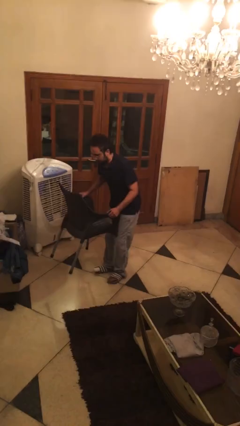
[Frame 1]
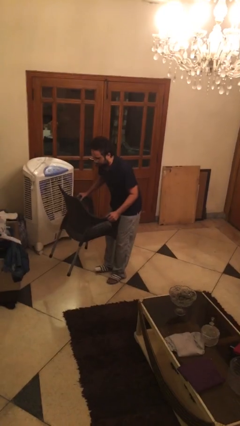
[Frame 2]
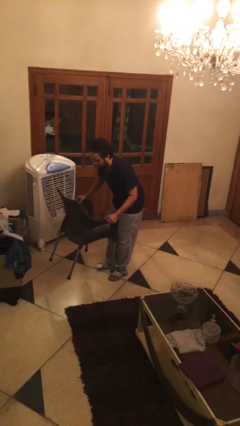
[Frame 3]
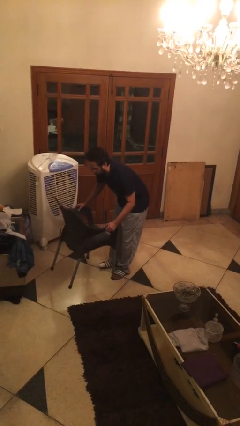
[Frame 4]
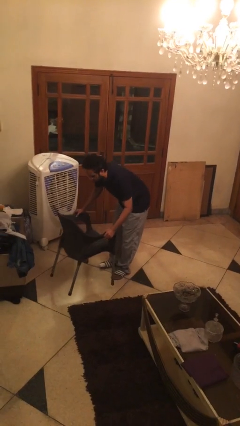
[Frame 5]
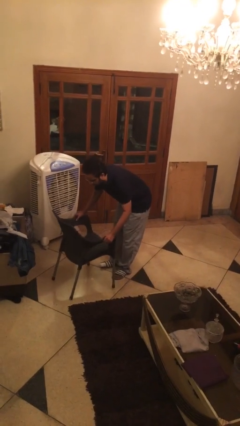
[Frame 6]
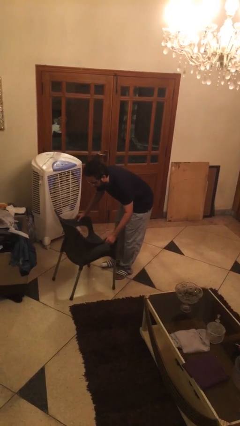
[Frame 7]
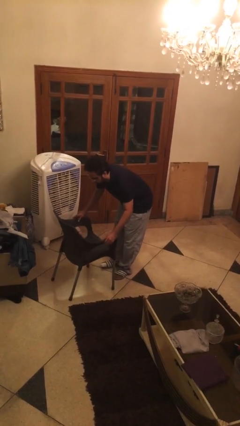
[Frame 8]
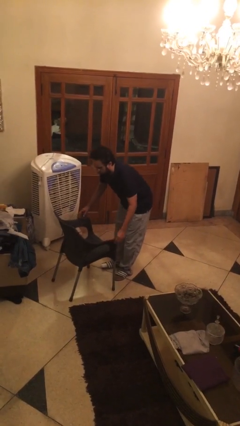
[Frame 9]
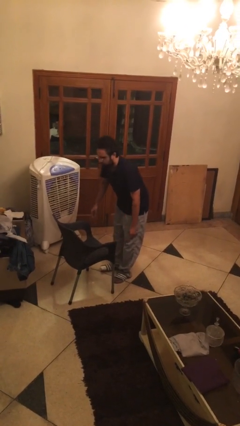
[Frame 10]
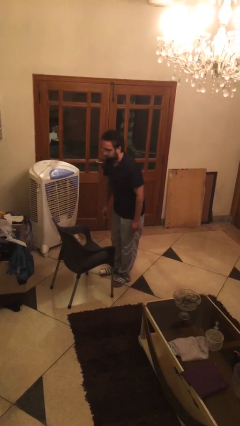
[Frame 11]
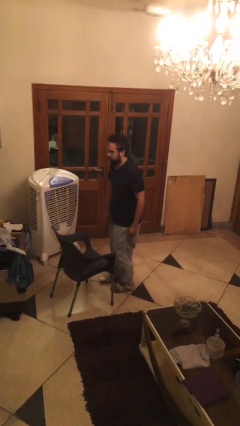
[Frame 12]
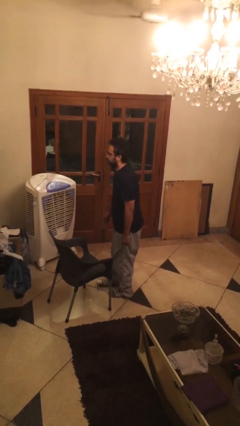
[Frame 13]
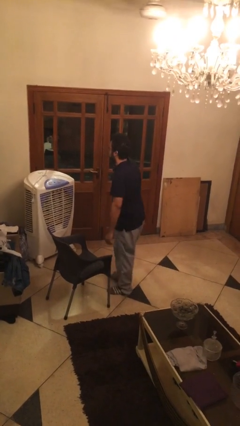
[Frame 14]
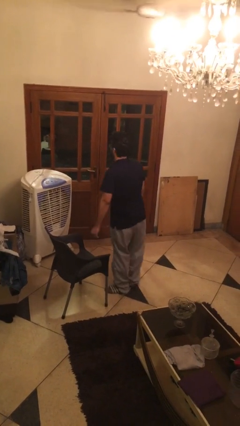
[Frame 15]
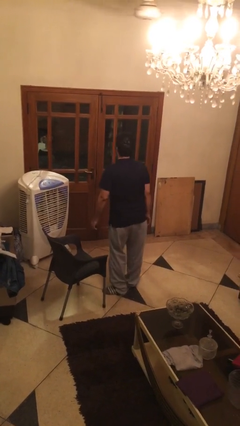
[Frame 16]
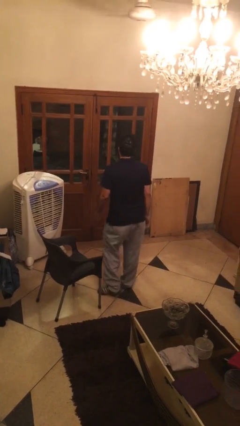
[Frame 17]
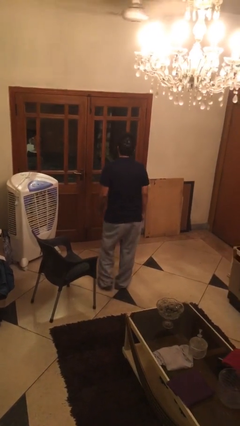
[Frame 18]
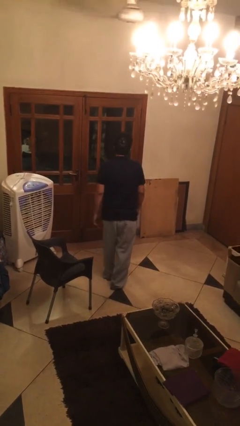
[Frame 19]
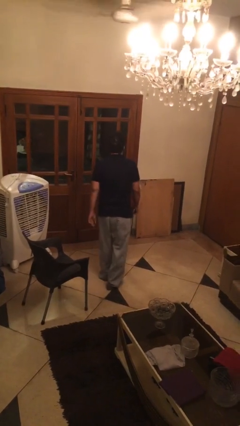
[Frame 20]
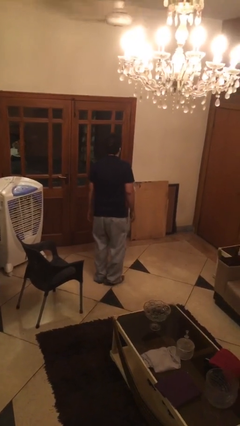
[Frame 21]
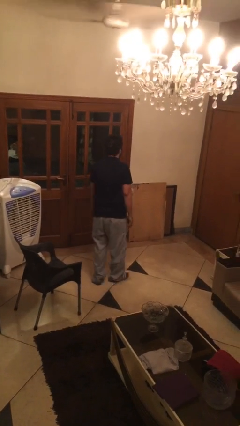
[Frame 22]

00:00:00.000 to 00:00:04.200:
person puts down object on floor

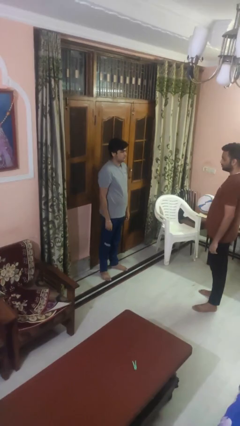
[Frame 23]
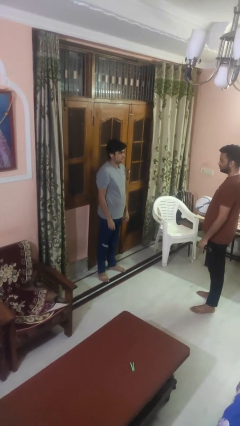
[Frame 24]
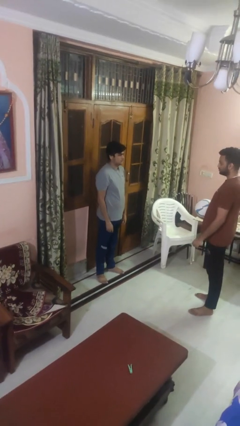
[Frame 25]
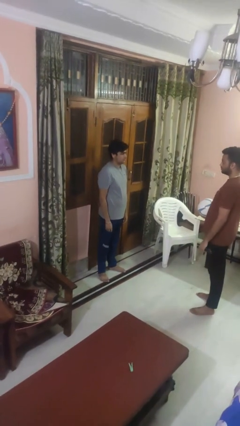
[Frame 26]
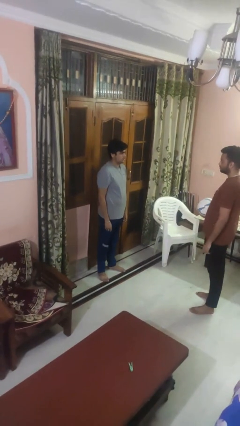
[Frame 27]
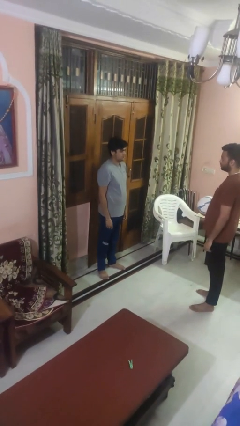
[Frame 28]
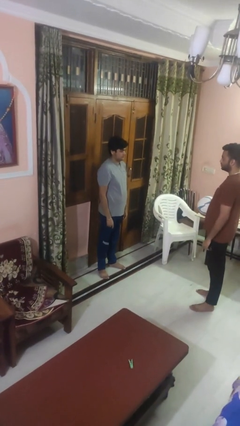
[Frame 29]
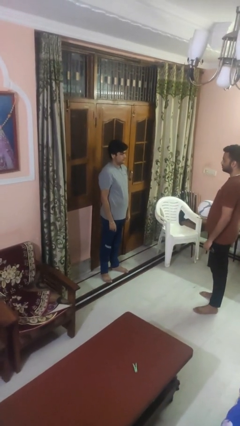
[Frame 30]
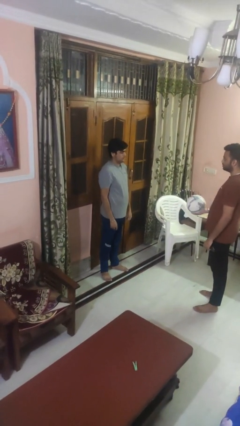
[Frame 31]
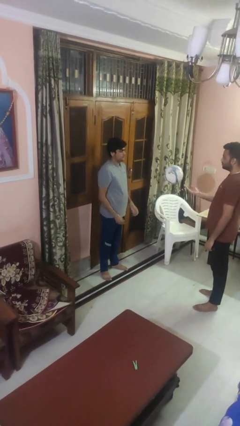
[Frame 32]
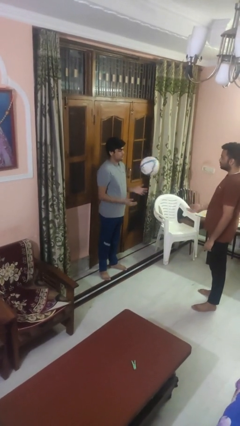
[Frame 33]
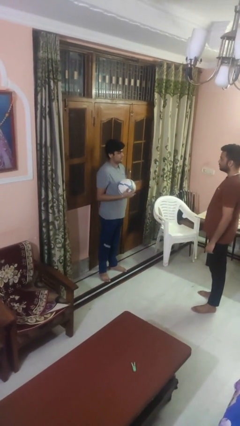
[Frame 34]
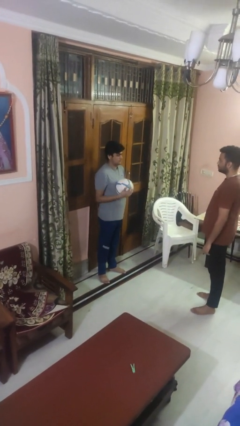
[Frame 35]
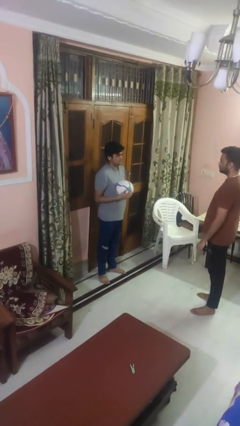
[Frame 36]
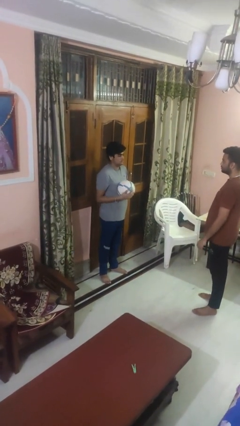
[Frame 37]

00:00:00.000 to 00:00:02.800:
person catches object from person

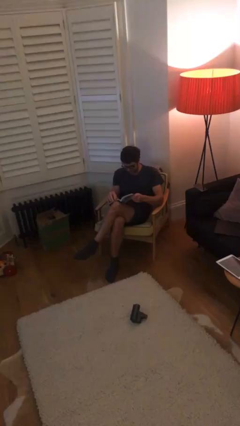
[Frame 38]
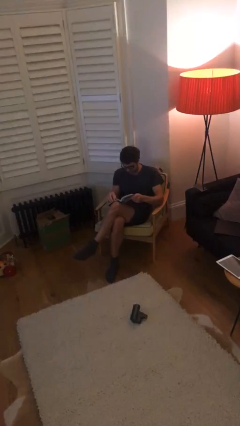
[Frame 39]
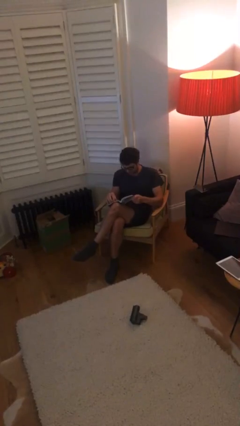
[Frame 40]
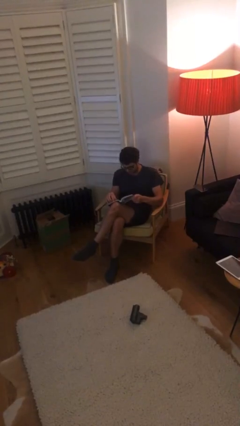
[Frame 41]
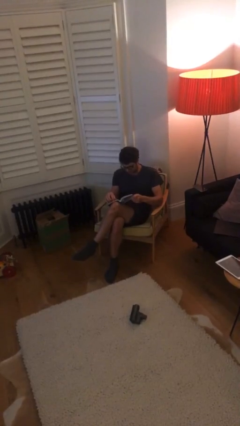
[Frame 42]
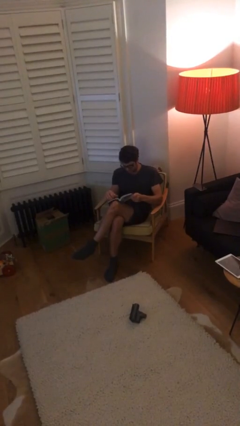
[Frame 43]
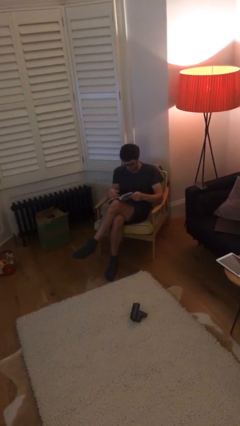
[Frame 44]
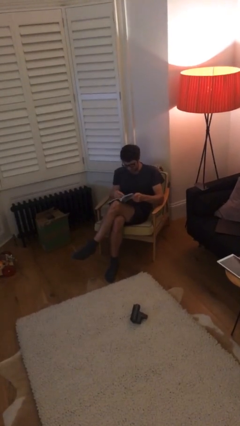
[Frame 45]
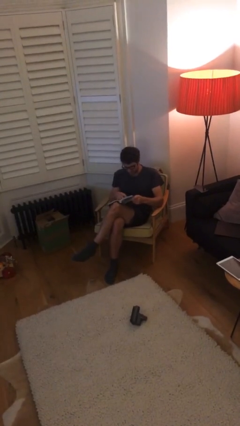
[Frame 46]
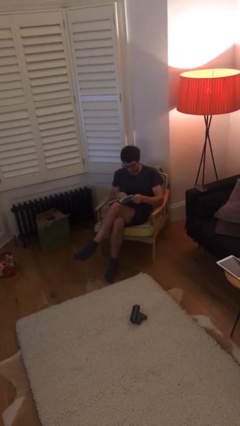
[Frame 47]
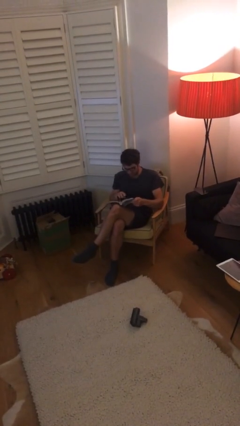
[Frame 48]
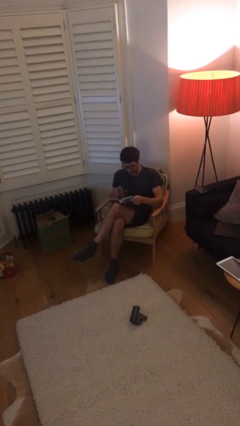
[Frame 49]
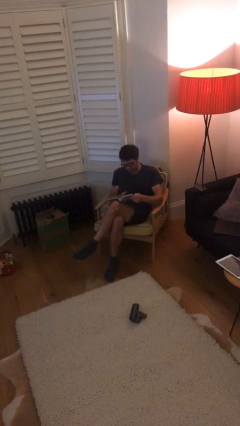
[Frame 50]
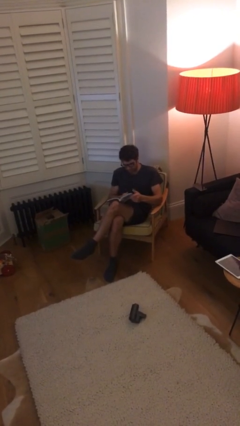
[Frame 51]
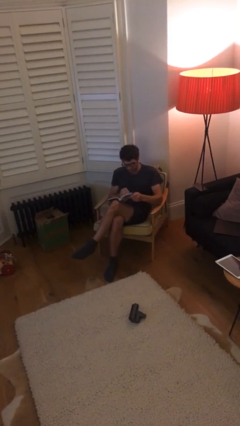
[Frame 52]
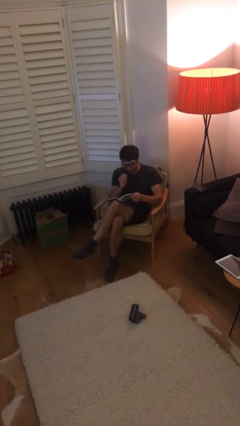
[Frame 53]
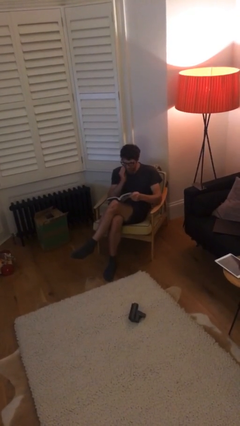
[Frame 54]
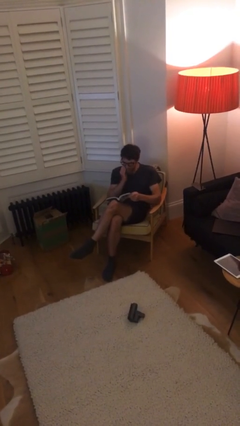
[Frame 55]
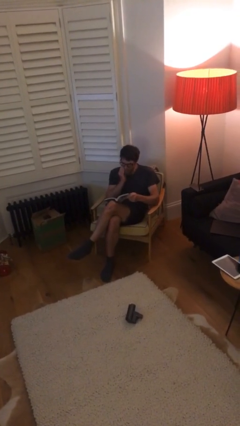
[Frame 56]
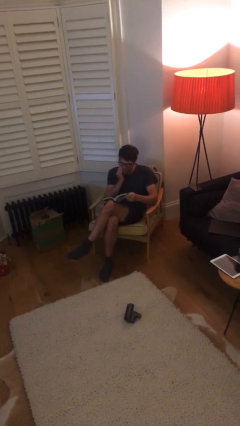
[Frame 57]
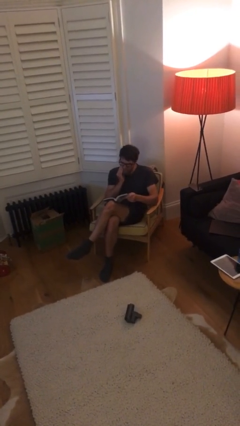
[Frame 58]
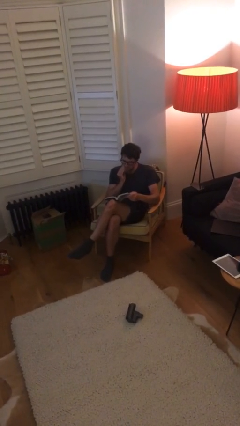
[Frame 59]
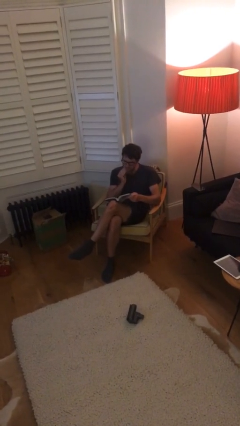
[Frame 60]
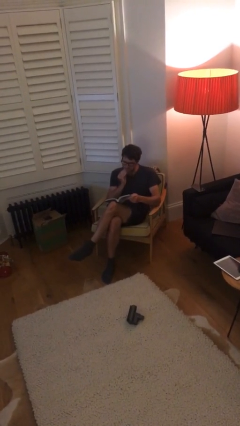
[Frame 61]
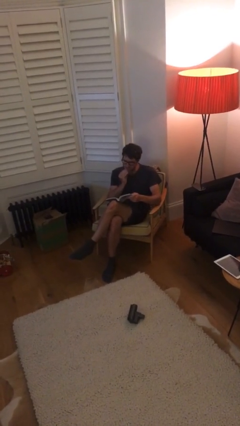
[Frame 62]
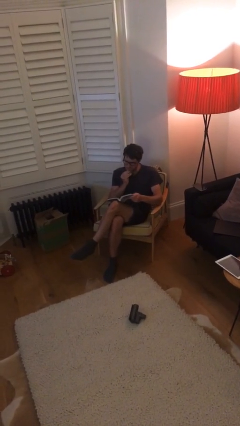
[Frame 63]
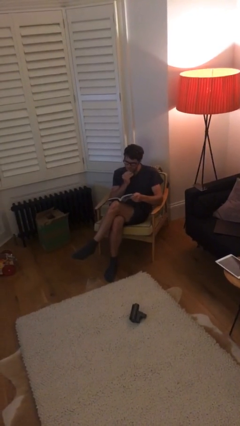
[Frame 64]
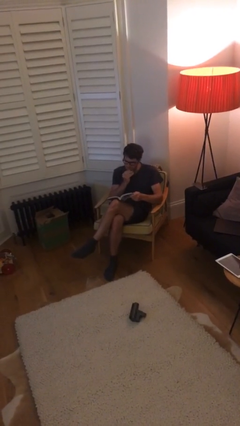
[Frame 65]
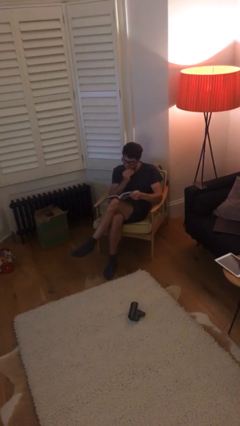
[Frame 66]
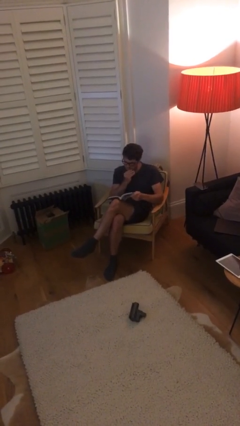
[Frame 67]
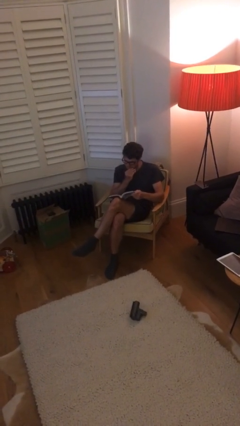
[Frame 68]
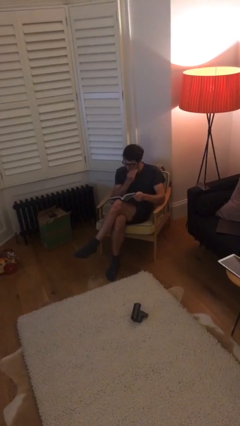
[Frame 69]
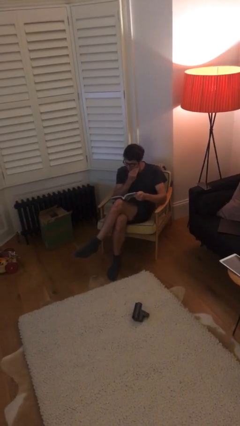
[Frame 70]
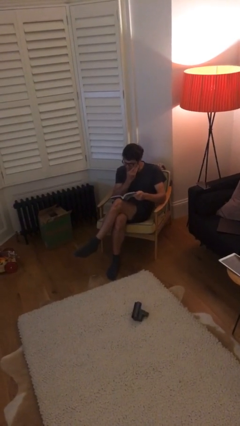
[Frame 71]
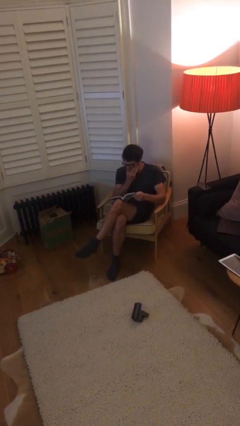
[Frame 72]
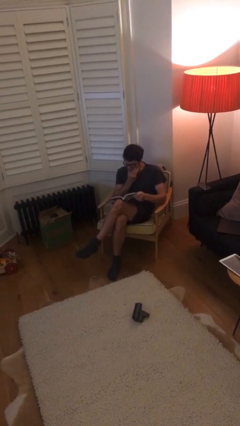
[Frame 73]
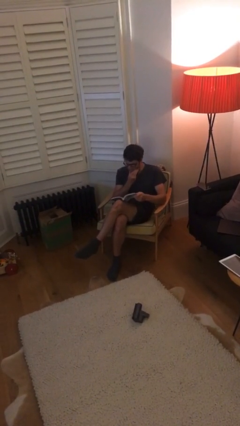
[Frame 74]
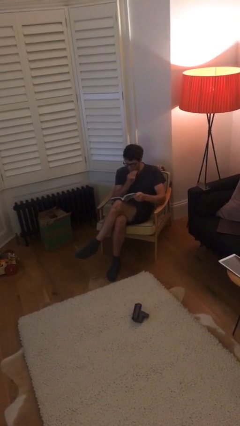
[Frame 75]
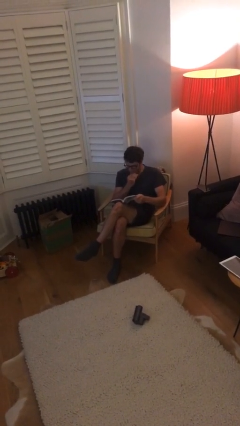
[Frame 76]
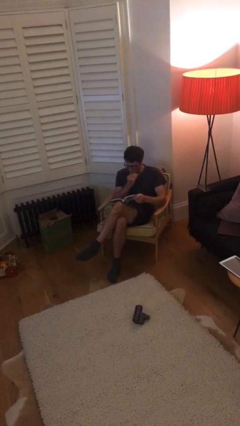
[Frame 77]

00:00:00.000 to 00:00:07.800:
person reads document

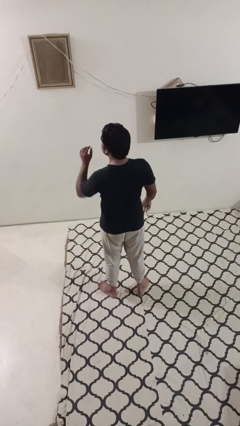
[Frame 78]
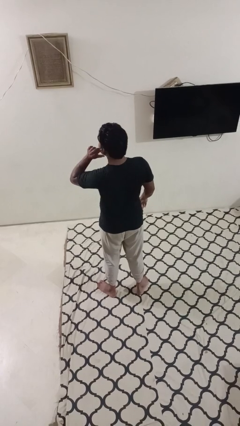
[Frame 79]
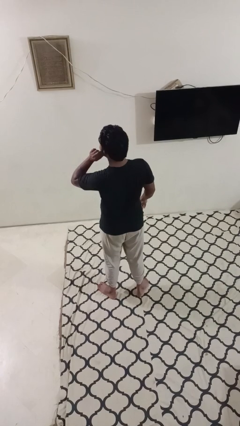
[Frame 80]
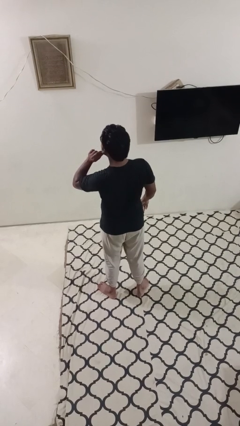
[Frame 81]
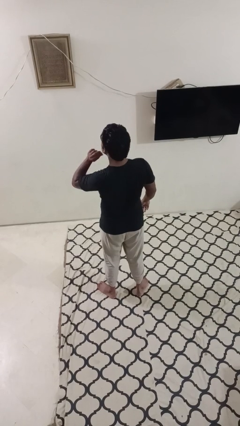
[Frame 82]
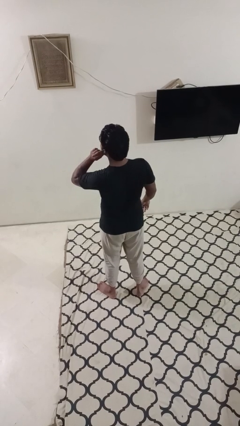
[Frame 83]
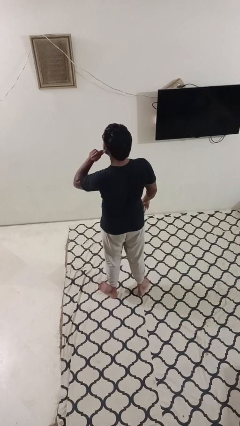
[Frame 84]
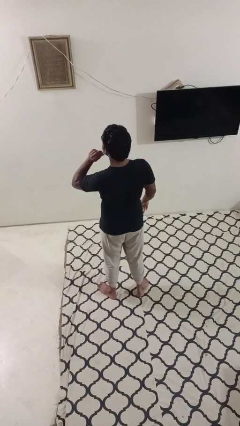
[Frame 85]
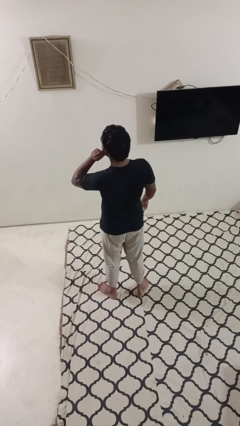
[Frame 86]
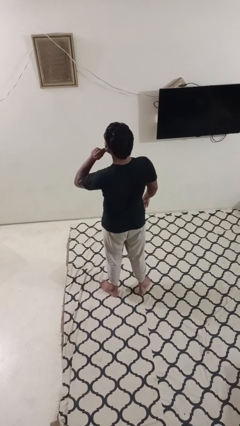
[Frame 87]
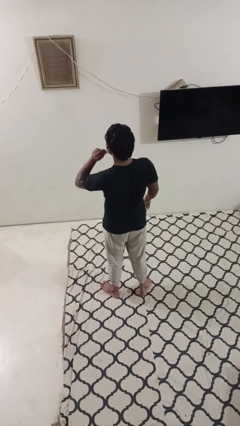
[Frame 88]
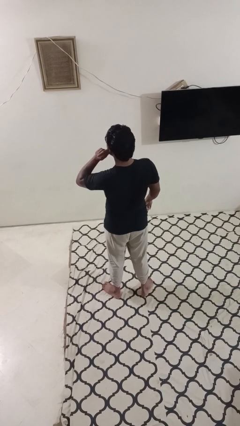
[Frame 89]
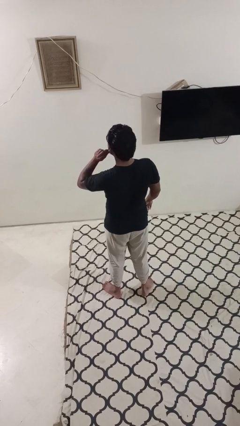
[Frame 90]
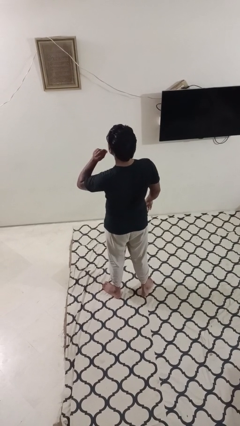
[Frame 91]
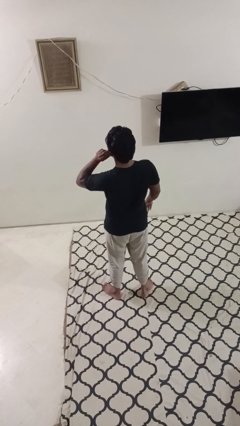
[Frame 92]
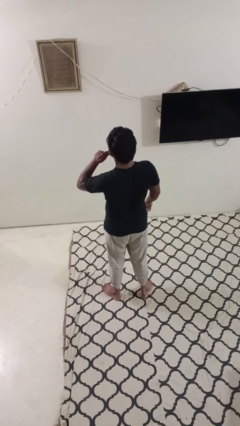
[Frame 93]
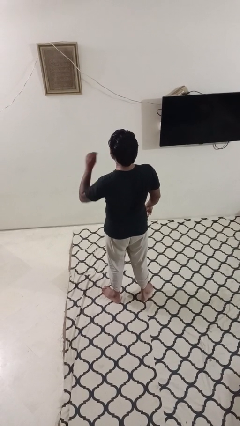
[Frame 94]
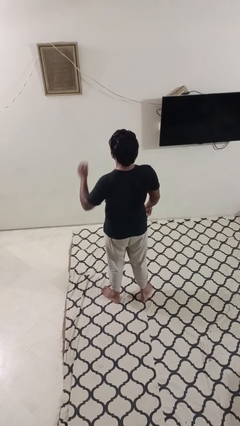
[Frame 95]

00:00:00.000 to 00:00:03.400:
person touches earlobe
